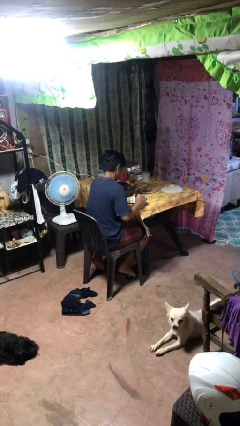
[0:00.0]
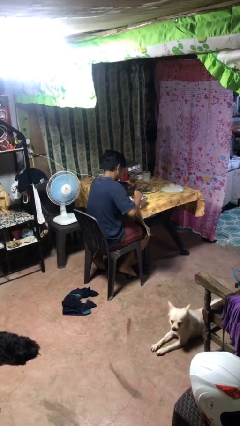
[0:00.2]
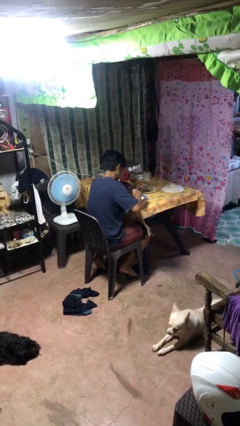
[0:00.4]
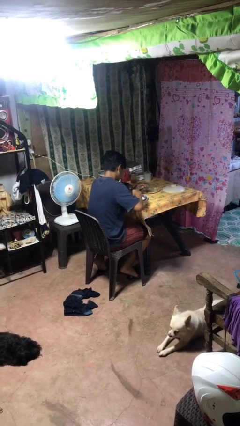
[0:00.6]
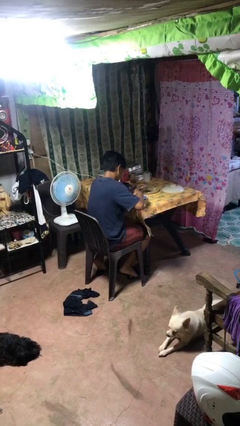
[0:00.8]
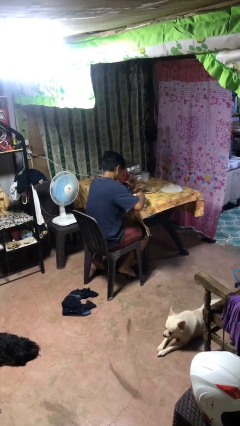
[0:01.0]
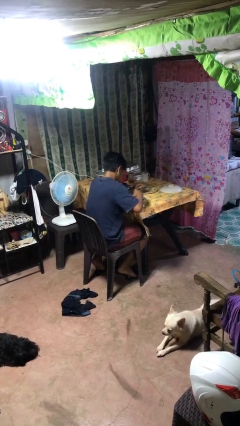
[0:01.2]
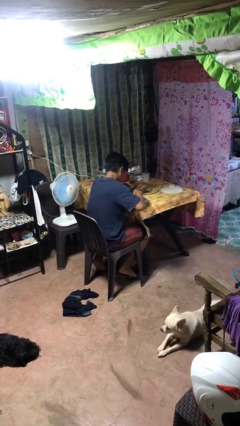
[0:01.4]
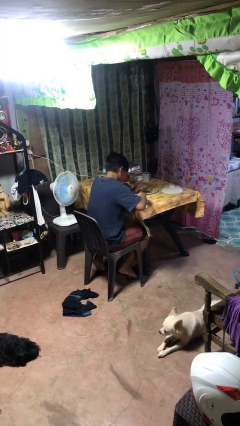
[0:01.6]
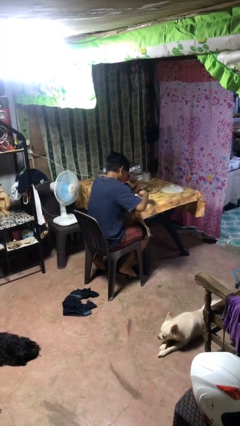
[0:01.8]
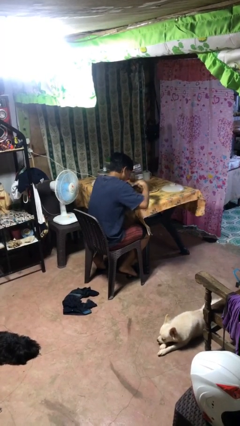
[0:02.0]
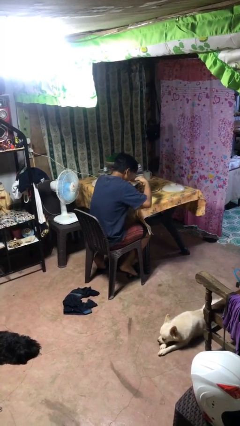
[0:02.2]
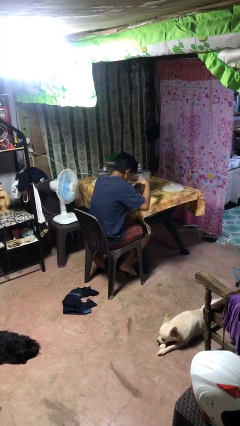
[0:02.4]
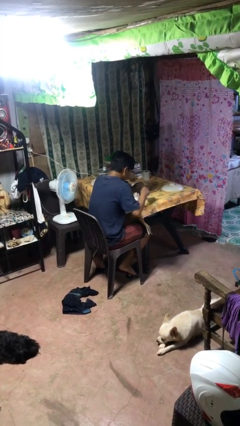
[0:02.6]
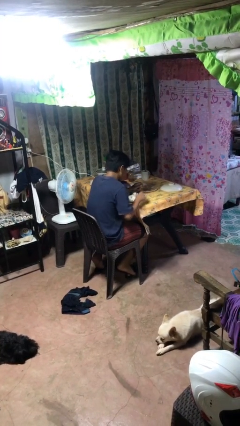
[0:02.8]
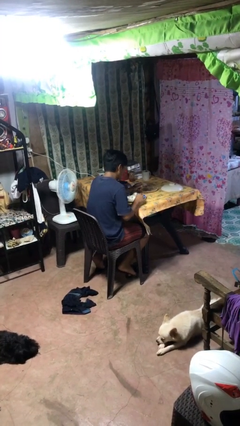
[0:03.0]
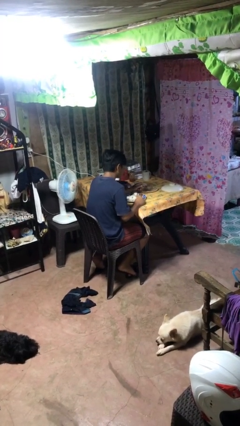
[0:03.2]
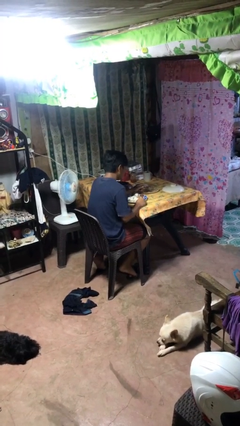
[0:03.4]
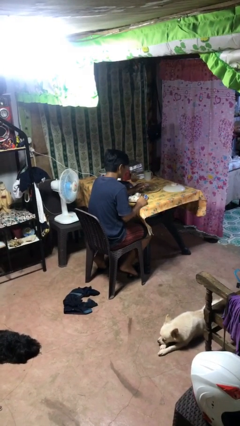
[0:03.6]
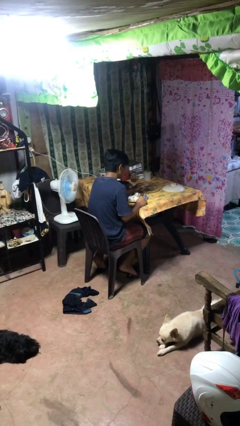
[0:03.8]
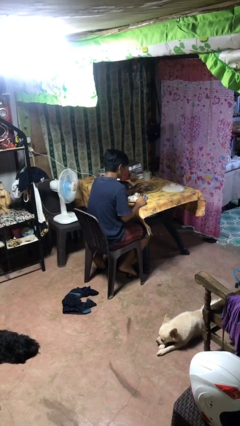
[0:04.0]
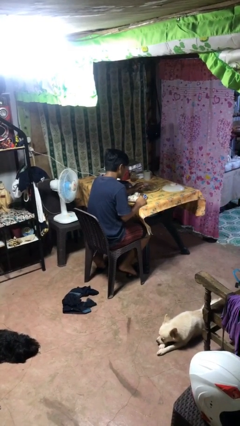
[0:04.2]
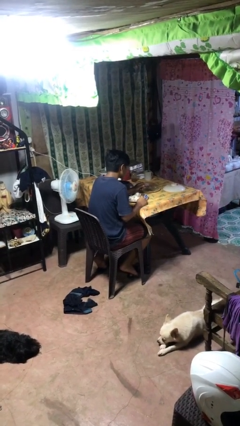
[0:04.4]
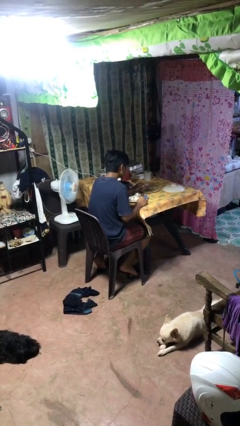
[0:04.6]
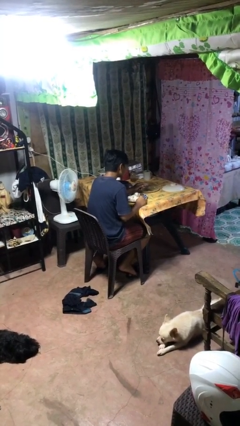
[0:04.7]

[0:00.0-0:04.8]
person eats with utensil

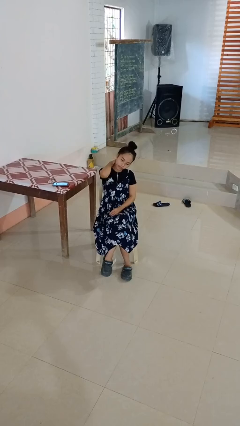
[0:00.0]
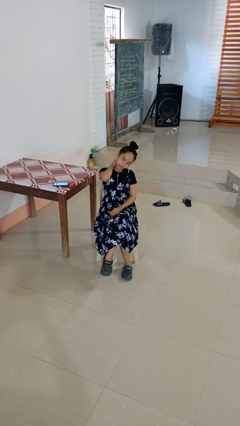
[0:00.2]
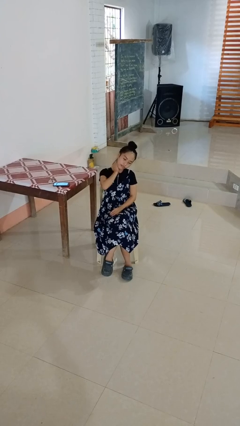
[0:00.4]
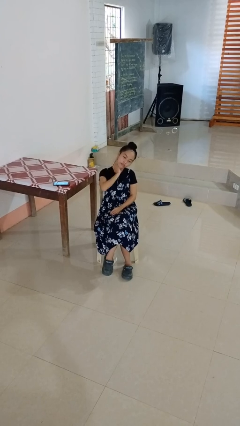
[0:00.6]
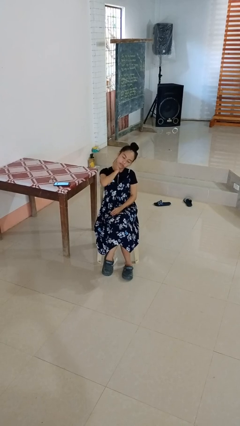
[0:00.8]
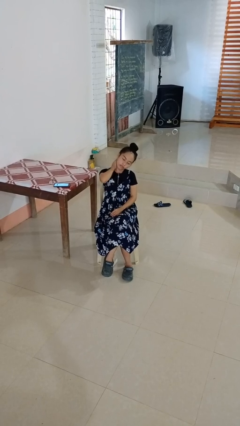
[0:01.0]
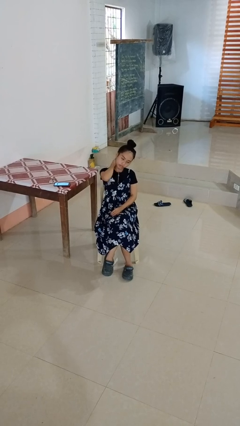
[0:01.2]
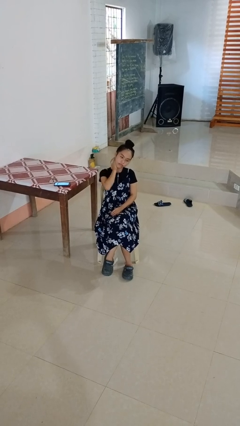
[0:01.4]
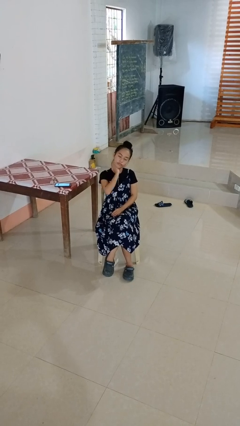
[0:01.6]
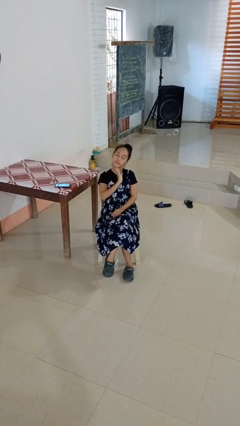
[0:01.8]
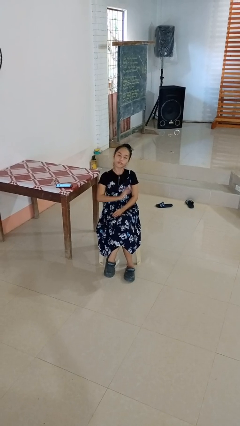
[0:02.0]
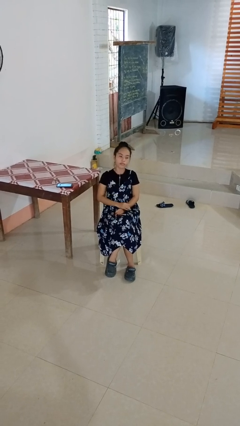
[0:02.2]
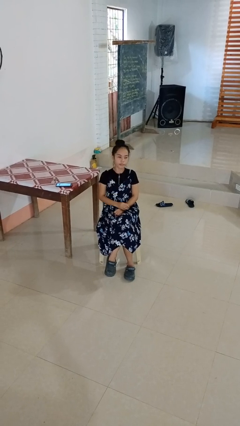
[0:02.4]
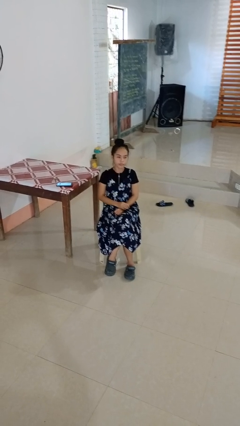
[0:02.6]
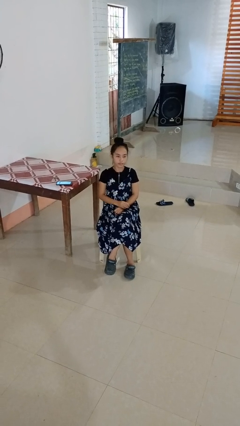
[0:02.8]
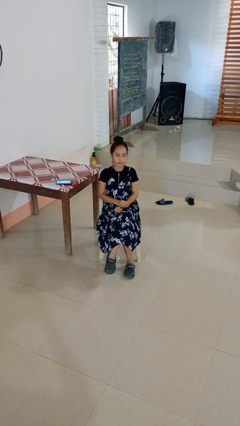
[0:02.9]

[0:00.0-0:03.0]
person rubs neck

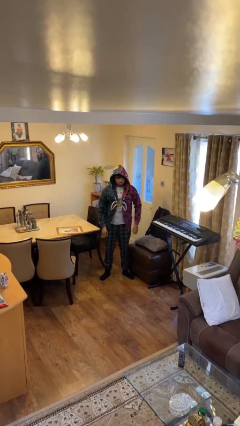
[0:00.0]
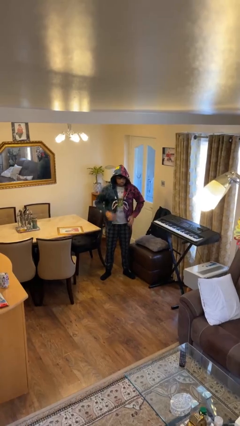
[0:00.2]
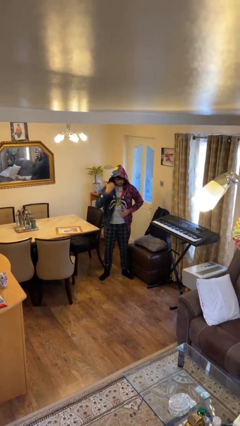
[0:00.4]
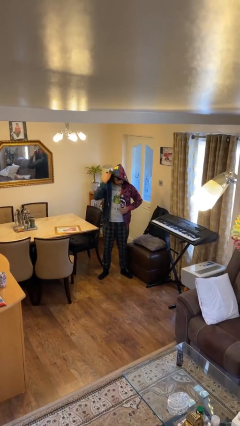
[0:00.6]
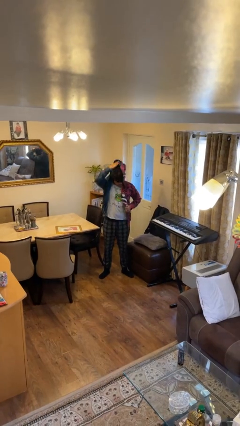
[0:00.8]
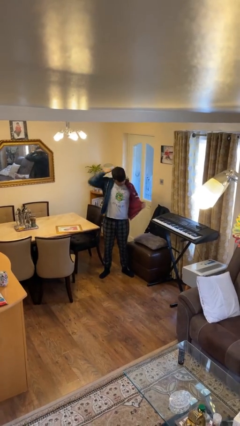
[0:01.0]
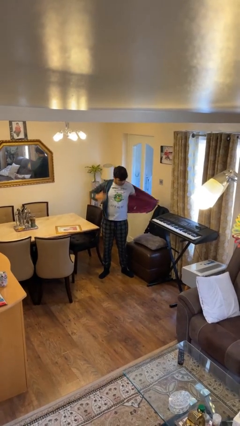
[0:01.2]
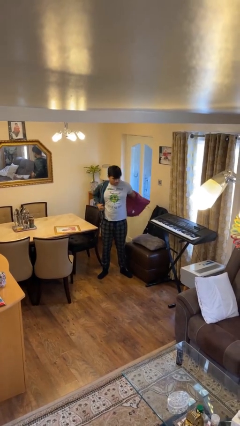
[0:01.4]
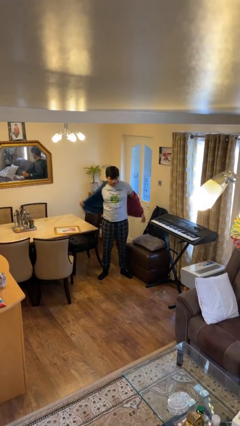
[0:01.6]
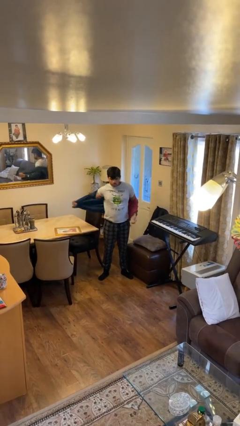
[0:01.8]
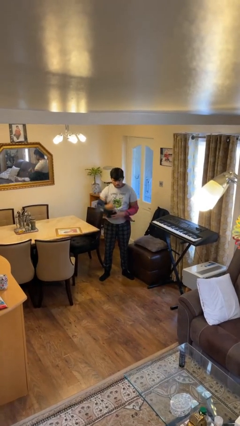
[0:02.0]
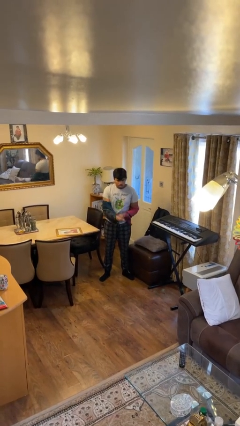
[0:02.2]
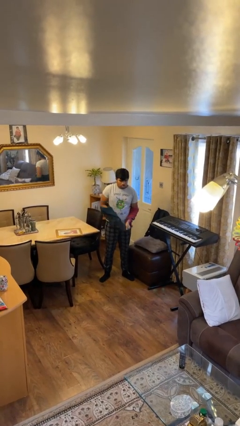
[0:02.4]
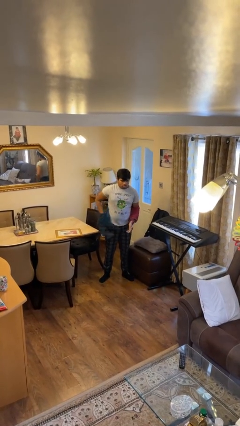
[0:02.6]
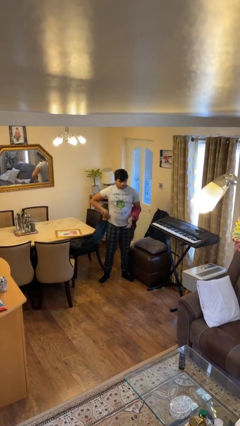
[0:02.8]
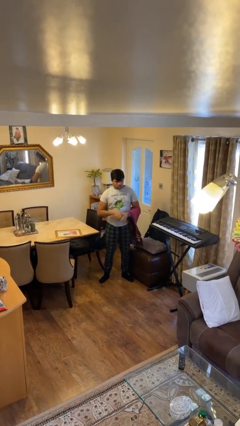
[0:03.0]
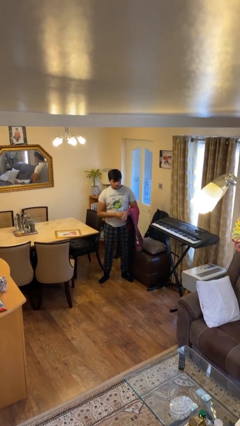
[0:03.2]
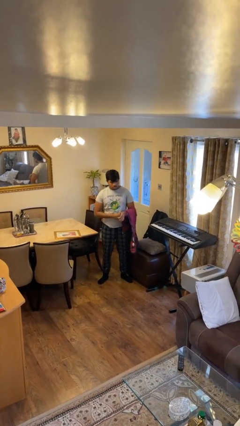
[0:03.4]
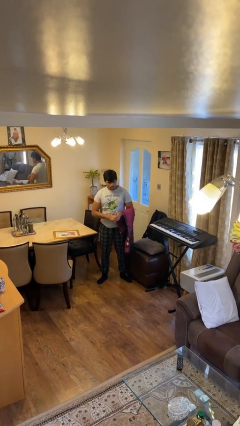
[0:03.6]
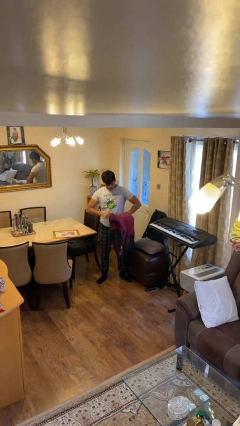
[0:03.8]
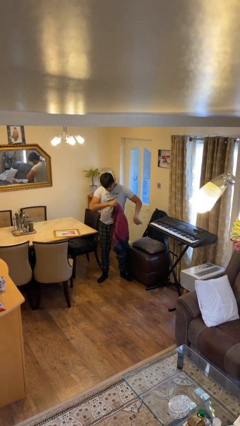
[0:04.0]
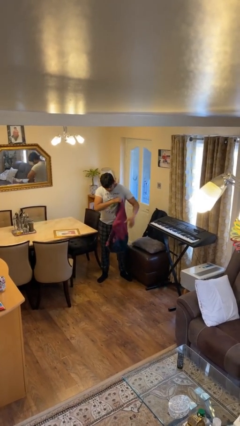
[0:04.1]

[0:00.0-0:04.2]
person takes off hoodie

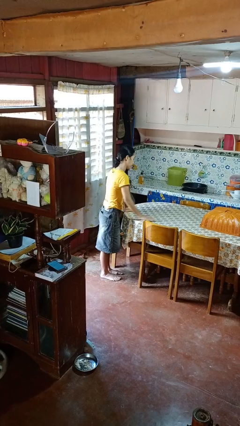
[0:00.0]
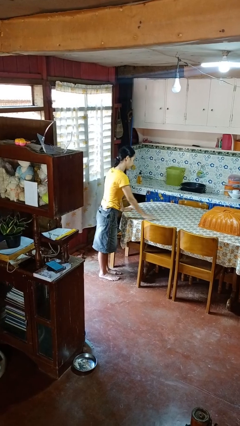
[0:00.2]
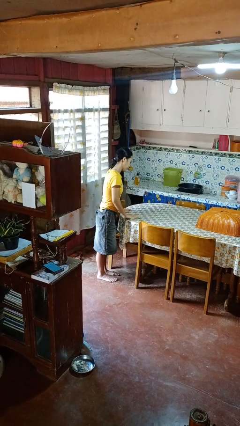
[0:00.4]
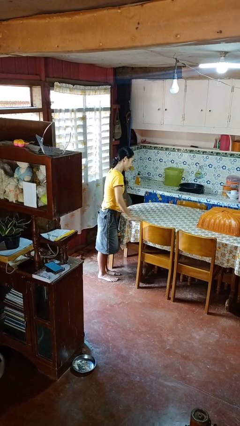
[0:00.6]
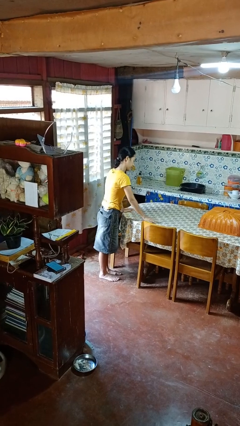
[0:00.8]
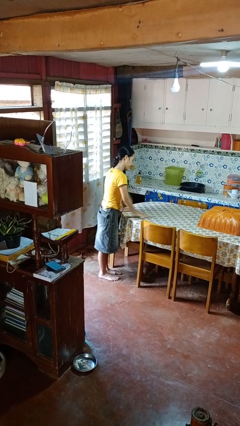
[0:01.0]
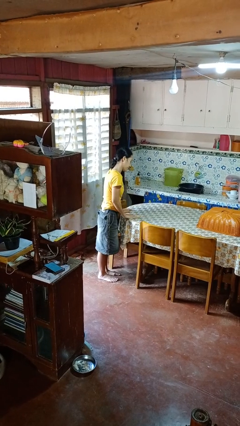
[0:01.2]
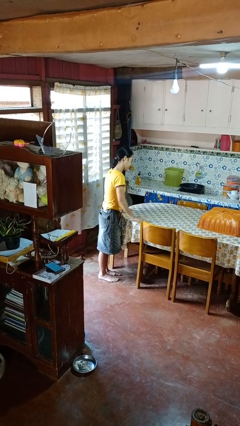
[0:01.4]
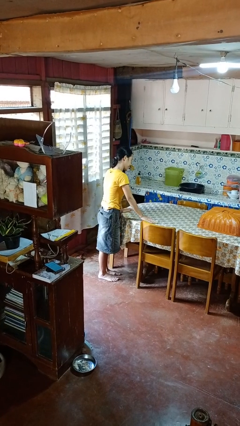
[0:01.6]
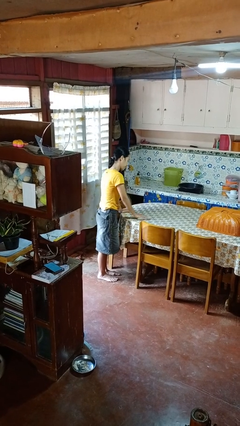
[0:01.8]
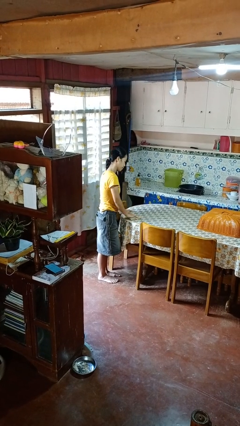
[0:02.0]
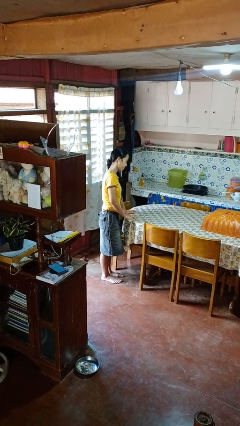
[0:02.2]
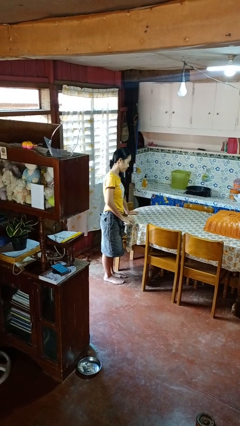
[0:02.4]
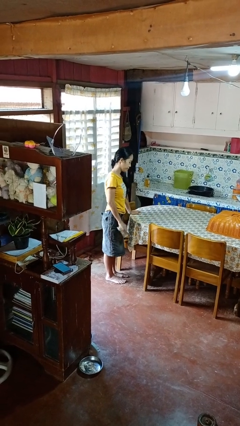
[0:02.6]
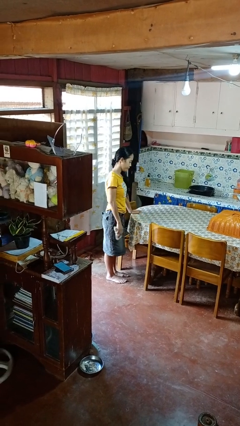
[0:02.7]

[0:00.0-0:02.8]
person cleans table with rag

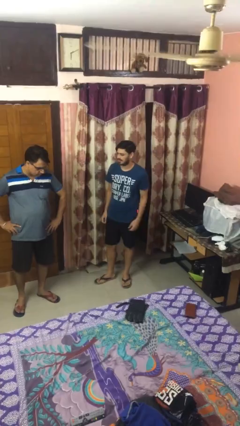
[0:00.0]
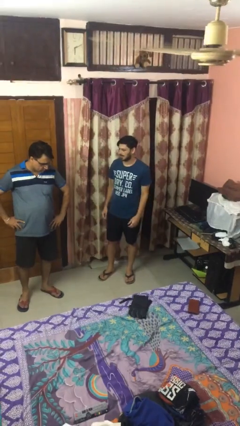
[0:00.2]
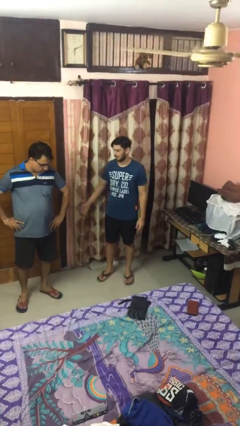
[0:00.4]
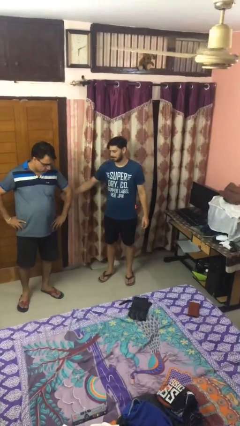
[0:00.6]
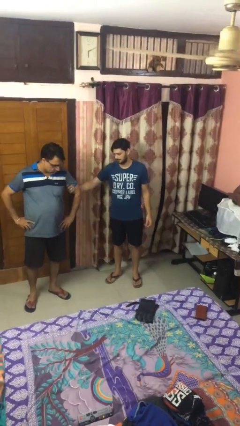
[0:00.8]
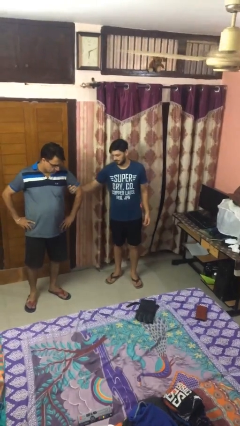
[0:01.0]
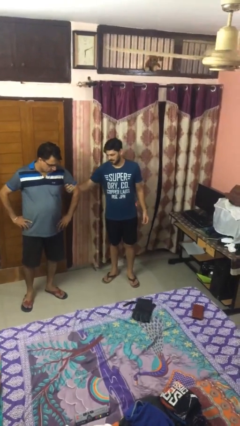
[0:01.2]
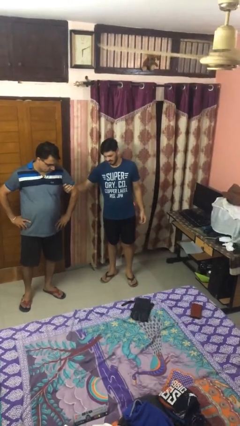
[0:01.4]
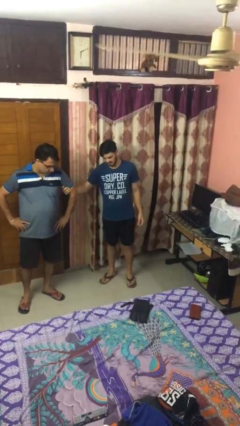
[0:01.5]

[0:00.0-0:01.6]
person grabs person by bicep

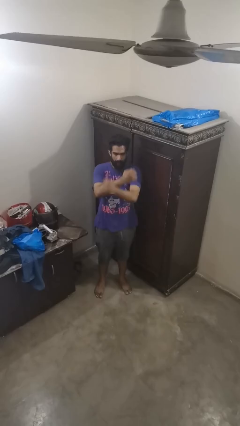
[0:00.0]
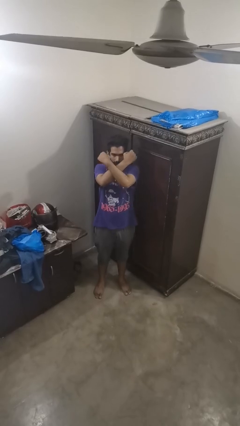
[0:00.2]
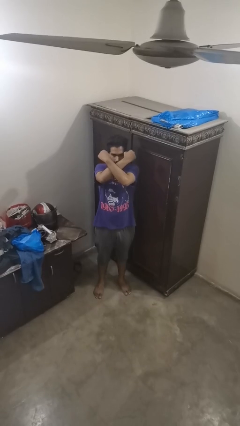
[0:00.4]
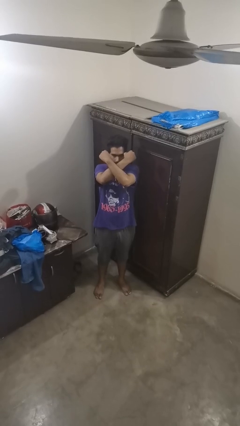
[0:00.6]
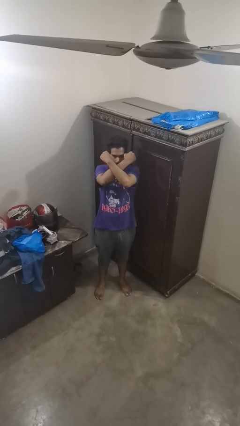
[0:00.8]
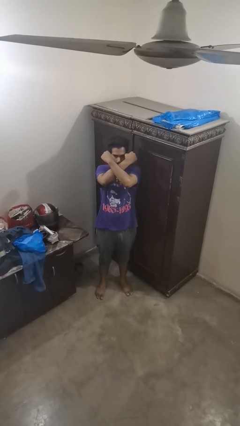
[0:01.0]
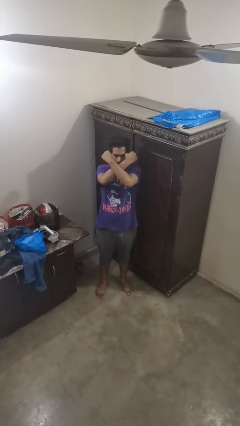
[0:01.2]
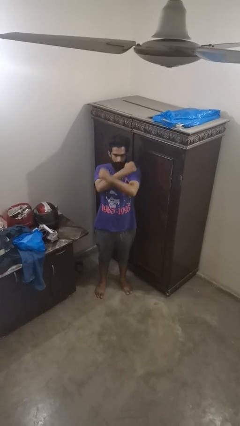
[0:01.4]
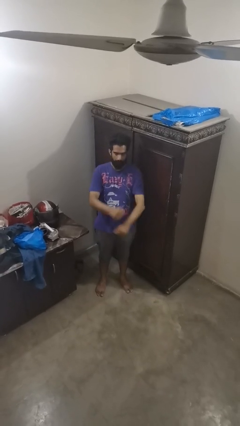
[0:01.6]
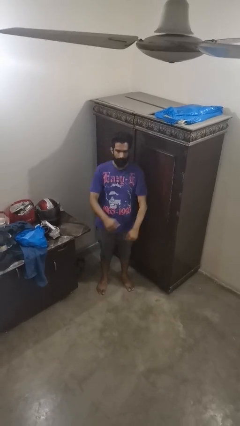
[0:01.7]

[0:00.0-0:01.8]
person gestures arms x
